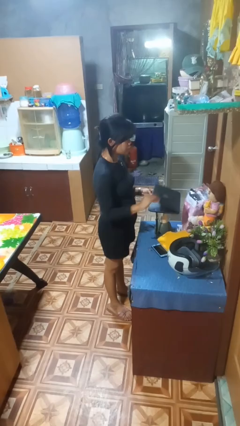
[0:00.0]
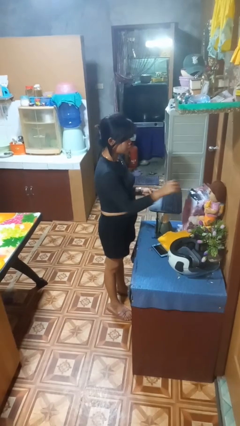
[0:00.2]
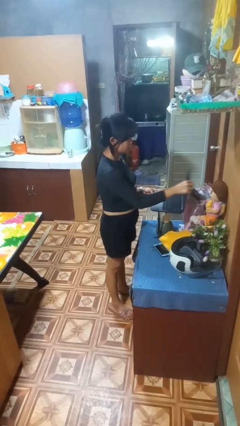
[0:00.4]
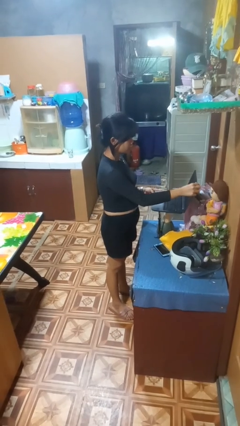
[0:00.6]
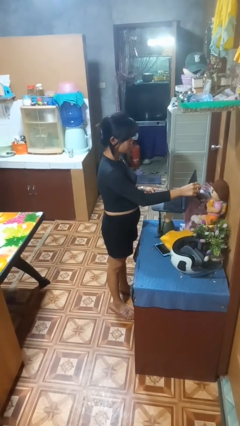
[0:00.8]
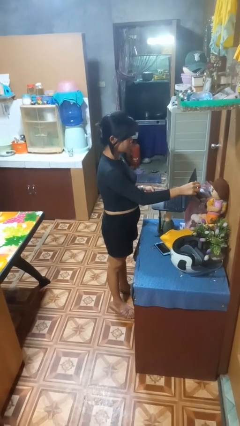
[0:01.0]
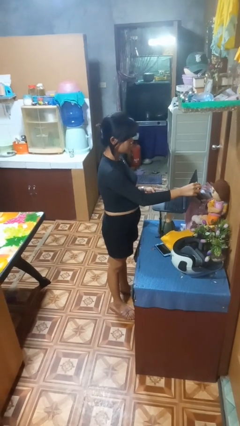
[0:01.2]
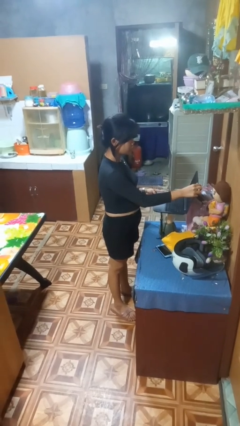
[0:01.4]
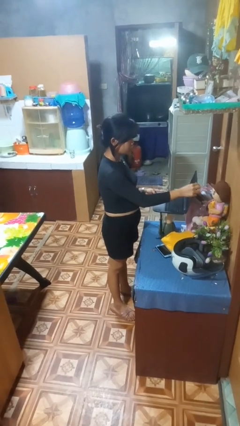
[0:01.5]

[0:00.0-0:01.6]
person opens laptop

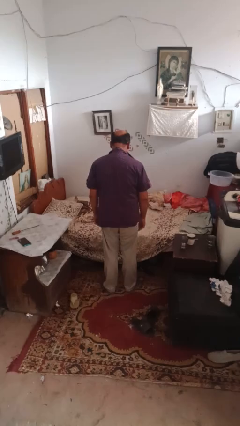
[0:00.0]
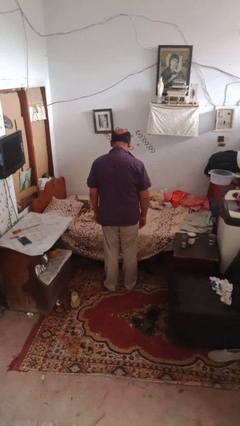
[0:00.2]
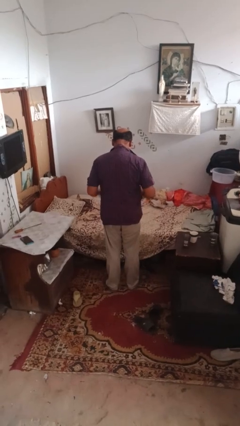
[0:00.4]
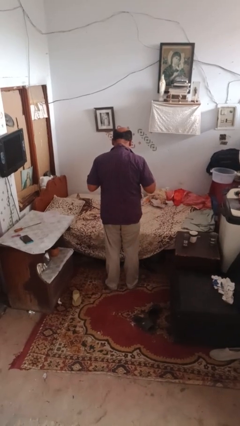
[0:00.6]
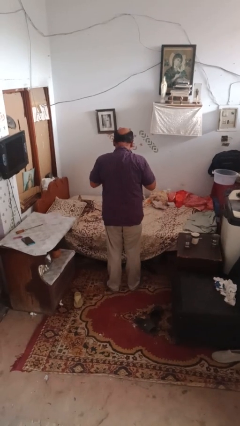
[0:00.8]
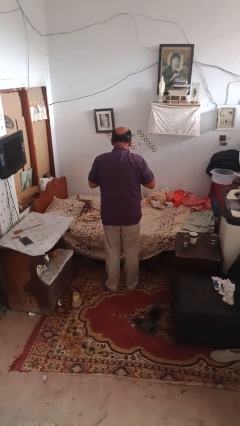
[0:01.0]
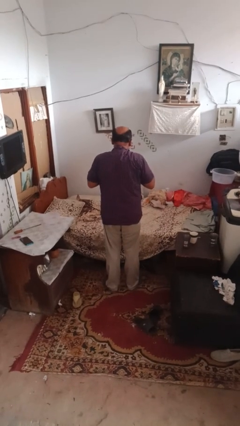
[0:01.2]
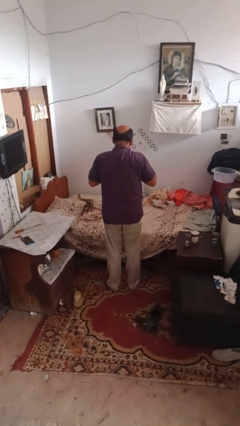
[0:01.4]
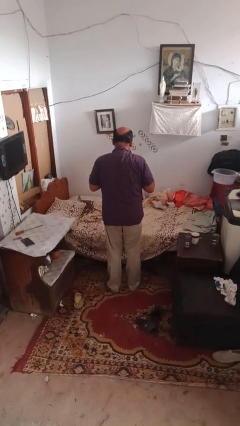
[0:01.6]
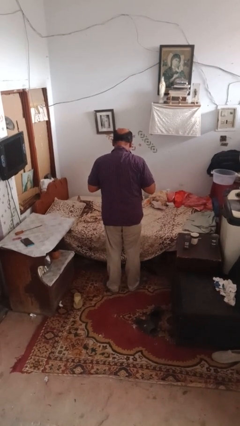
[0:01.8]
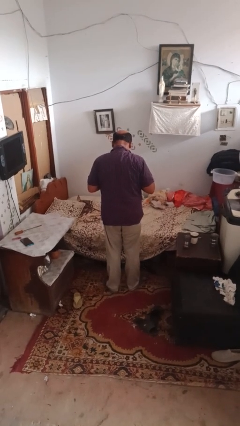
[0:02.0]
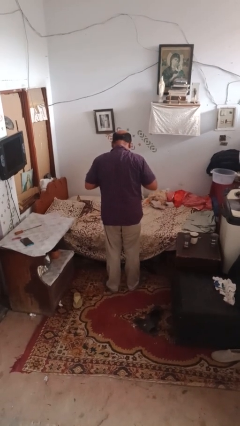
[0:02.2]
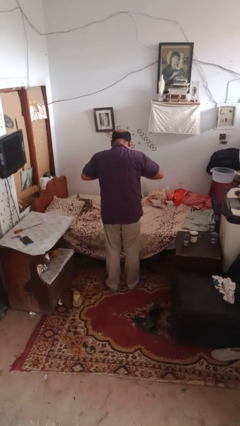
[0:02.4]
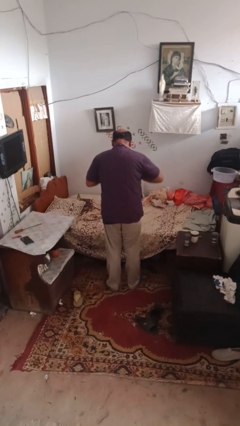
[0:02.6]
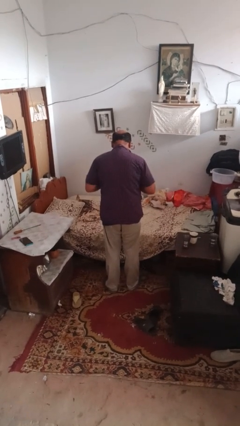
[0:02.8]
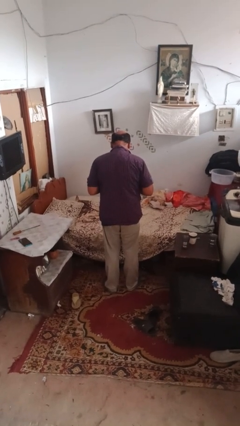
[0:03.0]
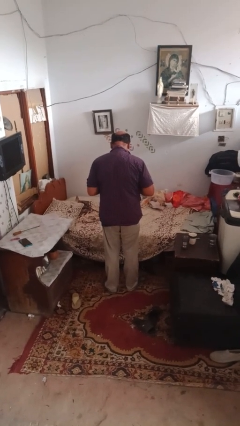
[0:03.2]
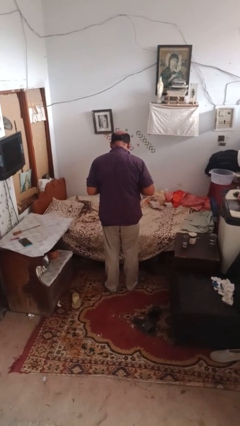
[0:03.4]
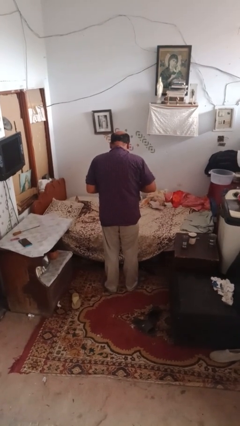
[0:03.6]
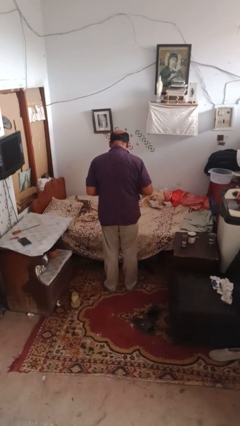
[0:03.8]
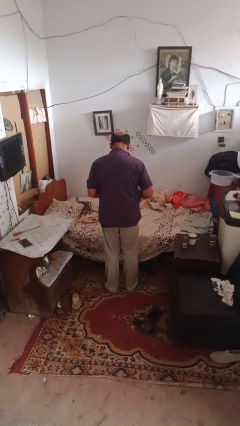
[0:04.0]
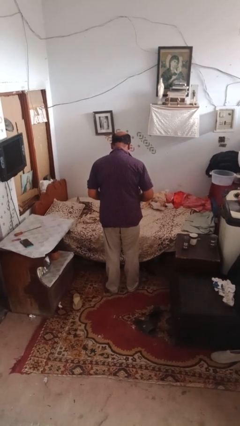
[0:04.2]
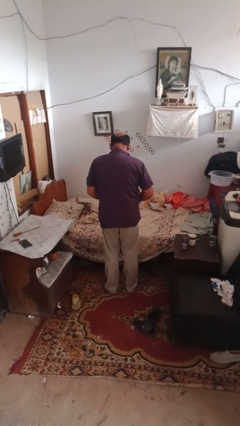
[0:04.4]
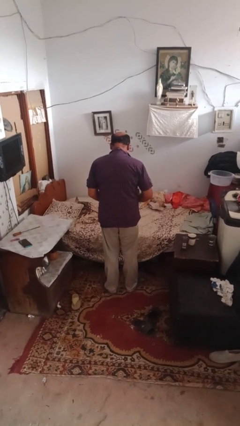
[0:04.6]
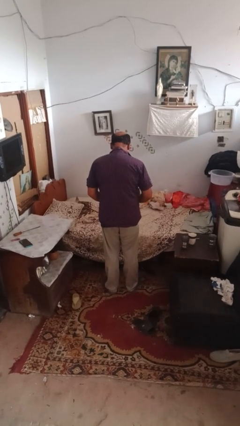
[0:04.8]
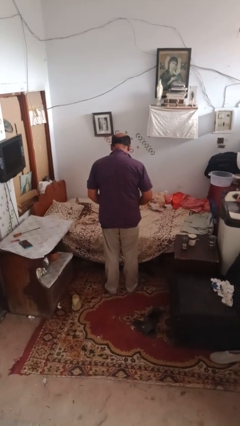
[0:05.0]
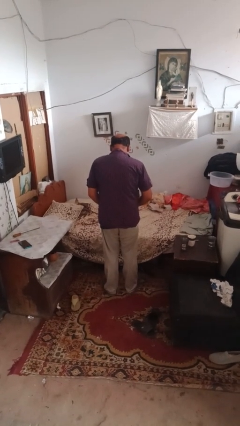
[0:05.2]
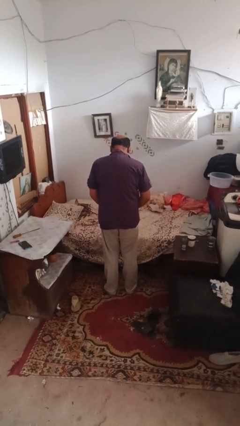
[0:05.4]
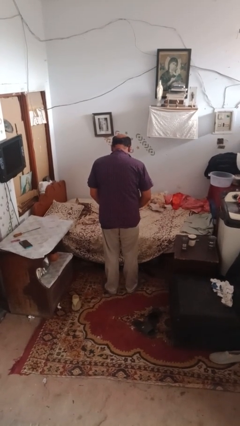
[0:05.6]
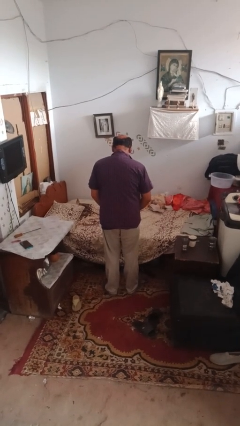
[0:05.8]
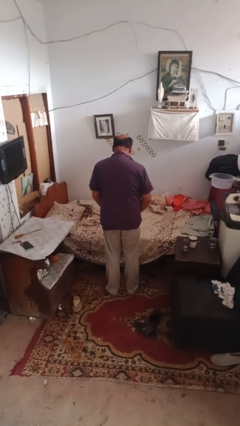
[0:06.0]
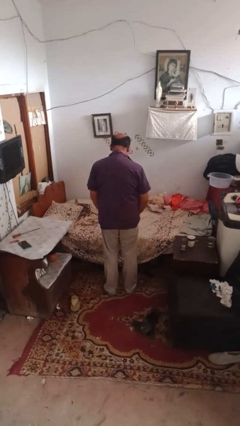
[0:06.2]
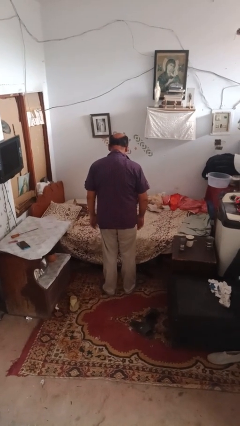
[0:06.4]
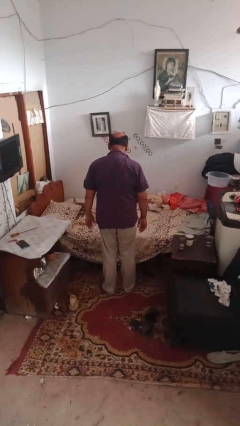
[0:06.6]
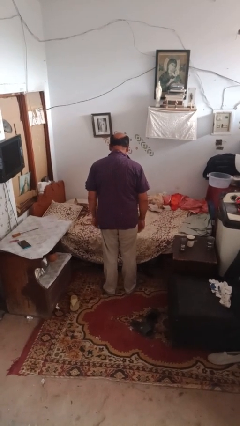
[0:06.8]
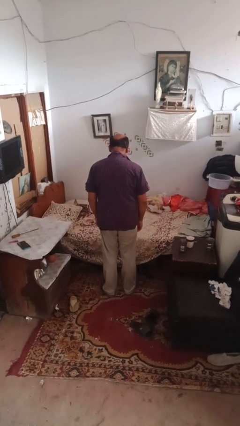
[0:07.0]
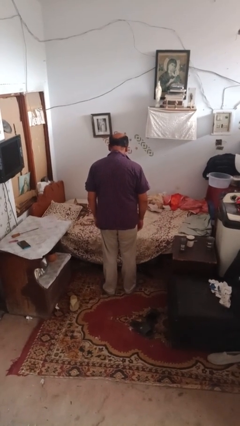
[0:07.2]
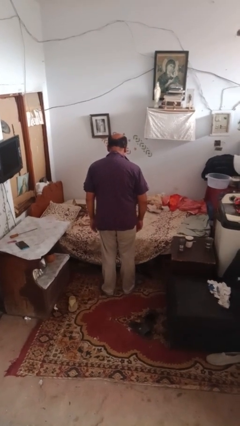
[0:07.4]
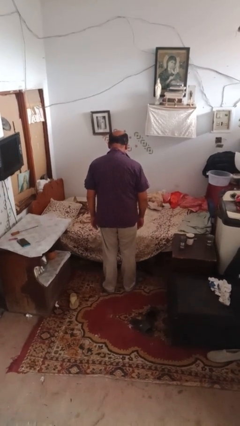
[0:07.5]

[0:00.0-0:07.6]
person unbuttons shirt

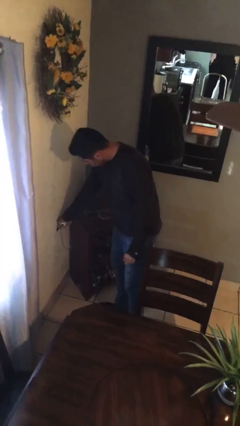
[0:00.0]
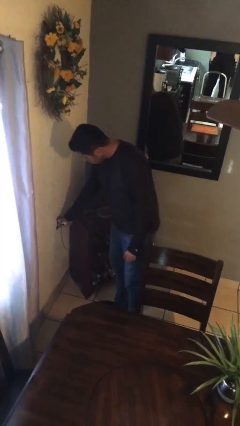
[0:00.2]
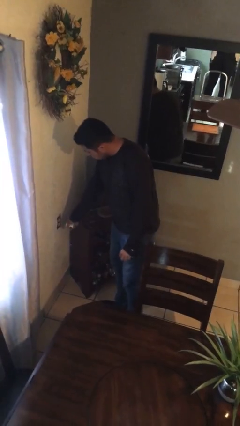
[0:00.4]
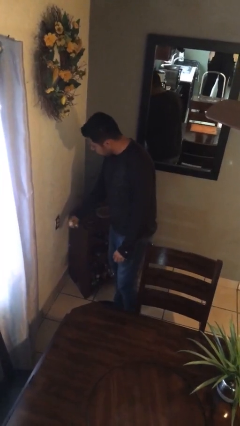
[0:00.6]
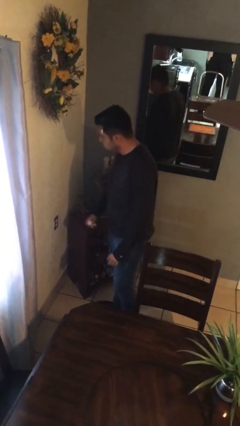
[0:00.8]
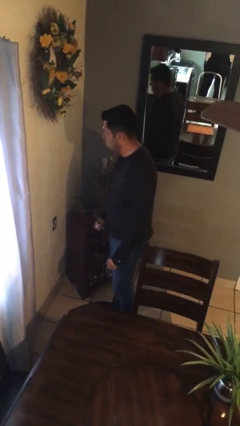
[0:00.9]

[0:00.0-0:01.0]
person pulls wheeled trashcan

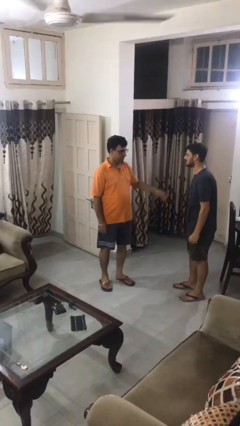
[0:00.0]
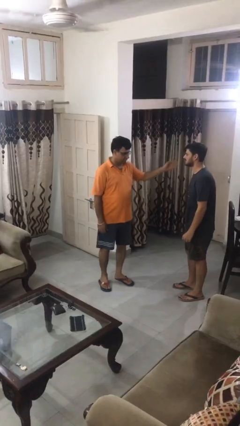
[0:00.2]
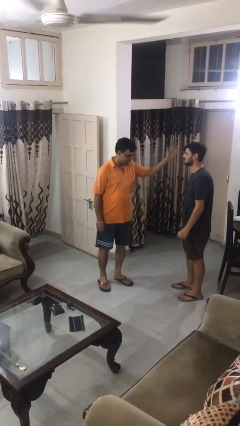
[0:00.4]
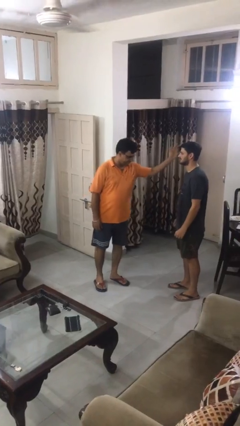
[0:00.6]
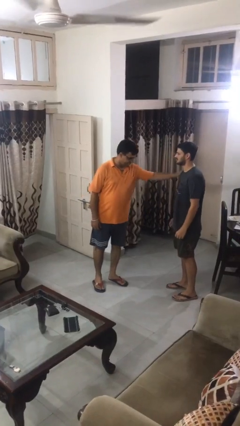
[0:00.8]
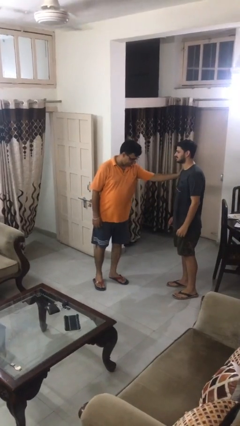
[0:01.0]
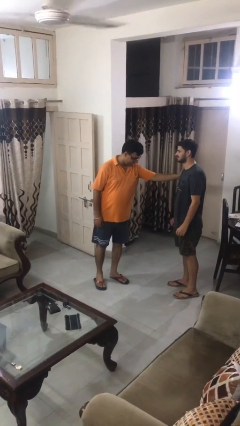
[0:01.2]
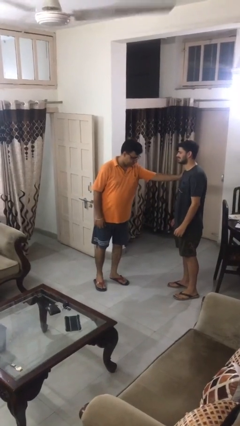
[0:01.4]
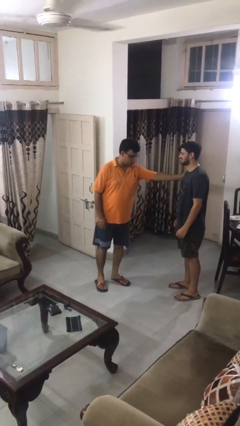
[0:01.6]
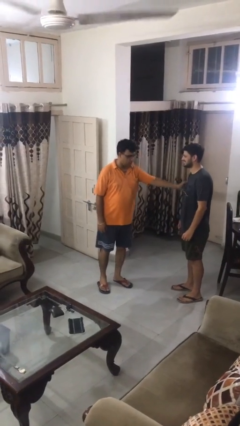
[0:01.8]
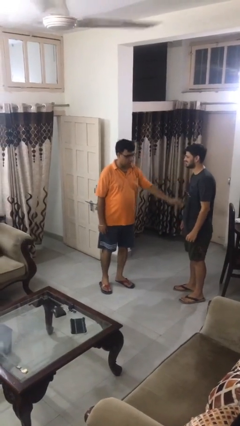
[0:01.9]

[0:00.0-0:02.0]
person pounds shoulders of person

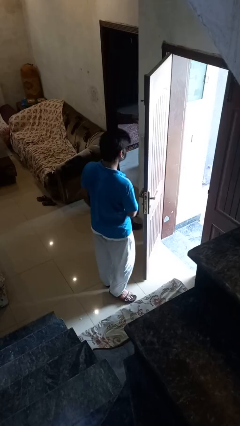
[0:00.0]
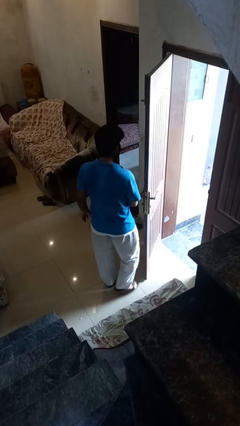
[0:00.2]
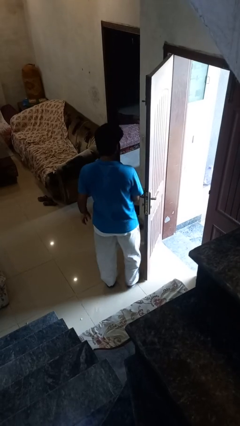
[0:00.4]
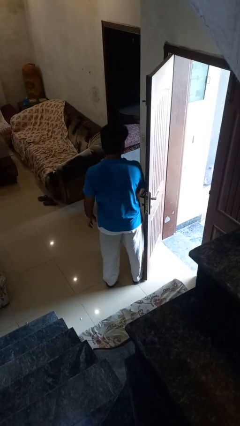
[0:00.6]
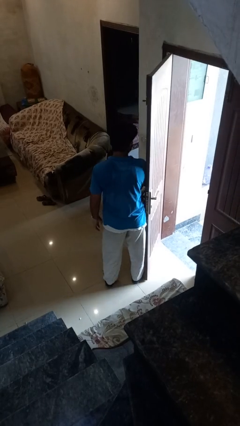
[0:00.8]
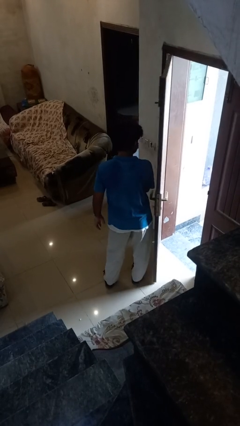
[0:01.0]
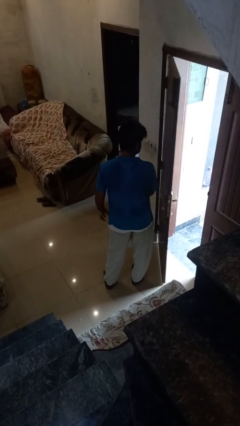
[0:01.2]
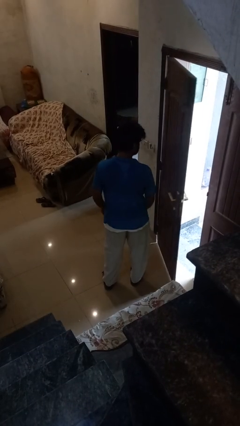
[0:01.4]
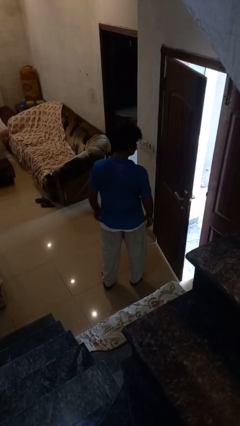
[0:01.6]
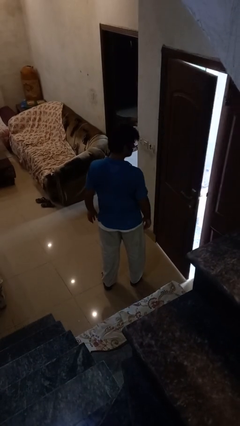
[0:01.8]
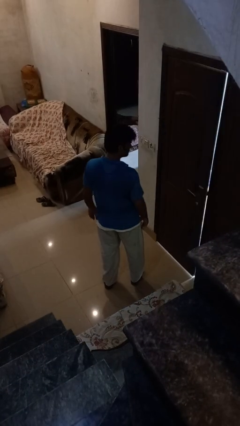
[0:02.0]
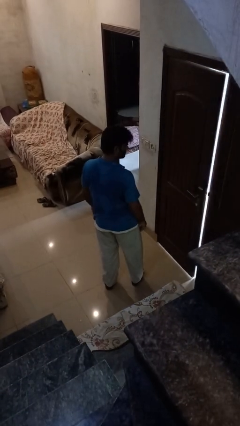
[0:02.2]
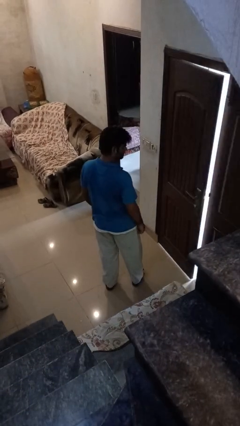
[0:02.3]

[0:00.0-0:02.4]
person closes door with hip

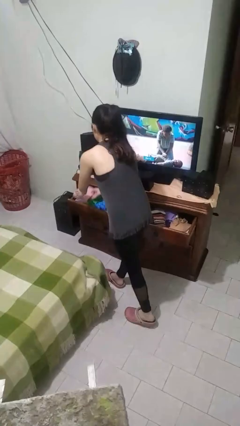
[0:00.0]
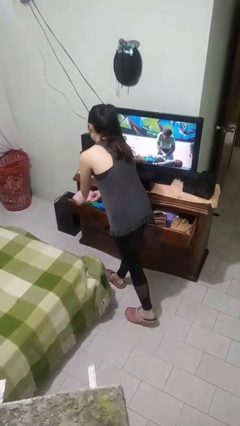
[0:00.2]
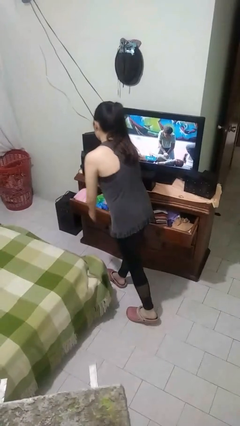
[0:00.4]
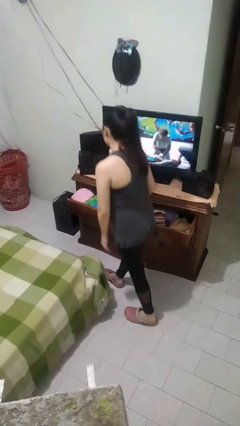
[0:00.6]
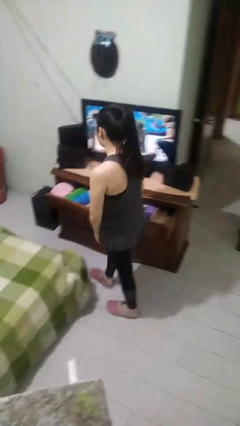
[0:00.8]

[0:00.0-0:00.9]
person puts clothes into dresser

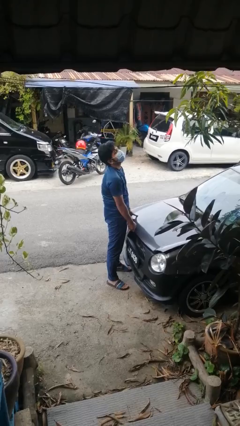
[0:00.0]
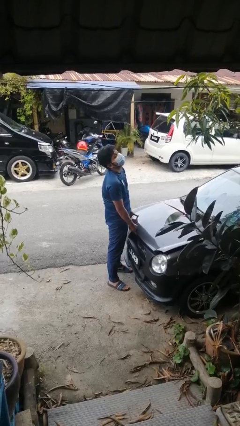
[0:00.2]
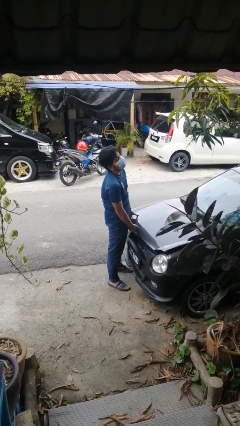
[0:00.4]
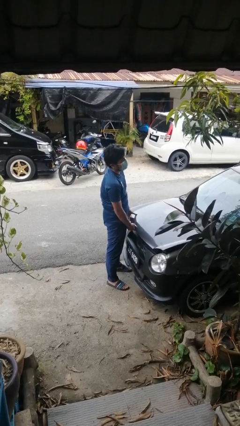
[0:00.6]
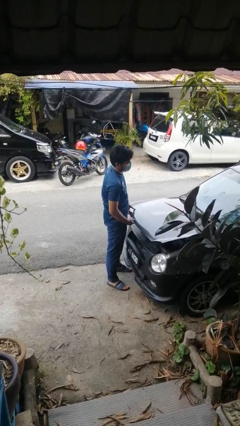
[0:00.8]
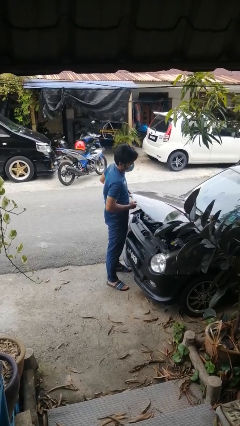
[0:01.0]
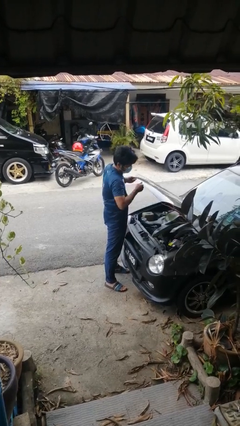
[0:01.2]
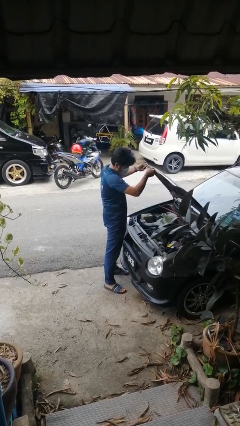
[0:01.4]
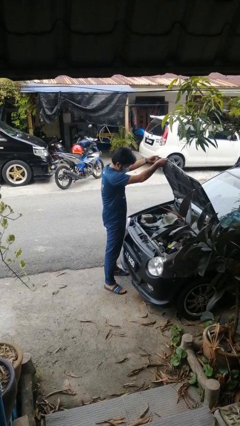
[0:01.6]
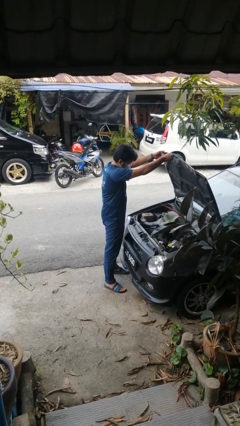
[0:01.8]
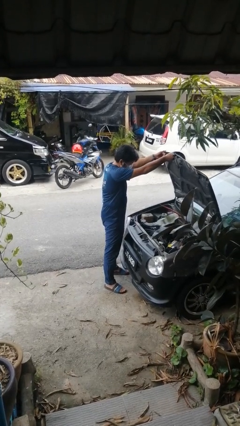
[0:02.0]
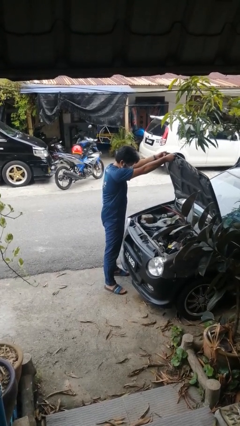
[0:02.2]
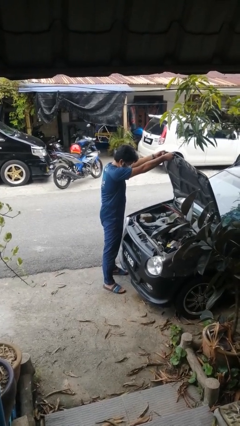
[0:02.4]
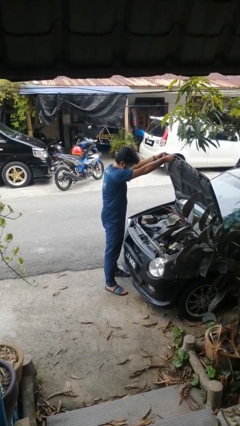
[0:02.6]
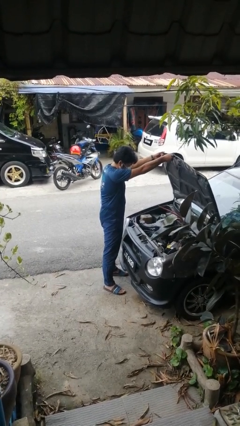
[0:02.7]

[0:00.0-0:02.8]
person opens car hood
